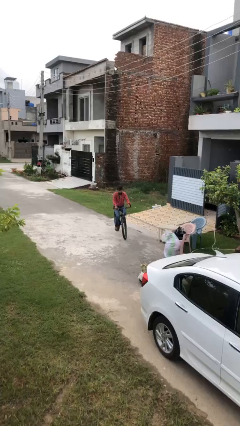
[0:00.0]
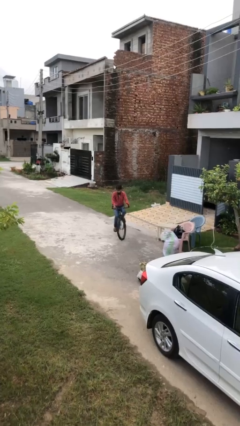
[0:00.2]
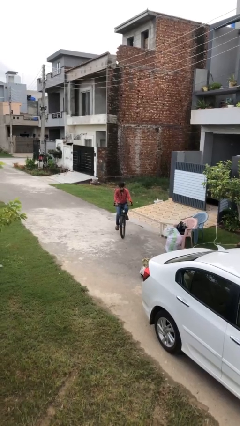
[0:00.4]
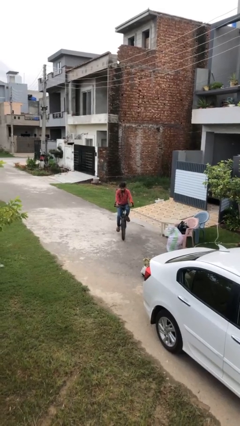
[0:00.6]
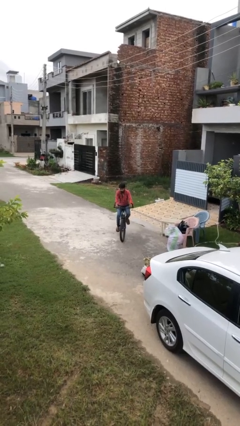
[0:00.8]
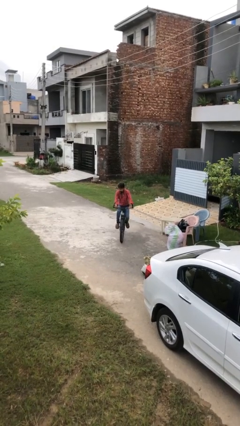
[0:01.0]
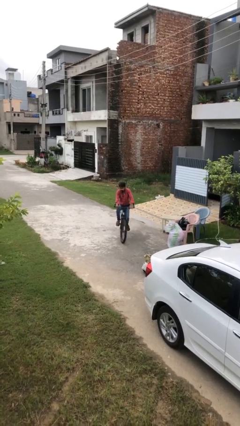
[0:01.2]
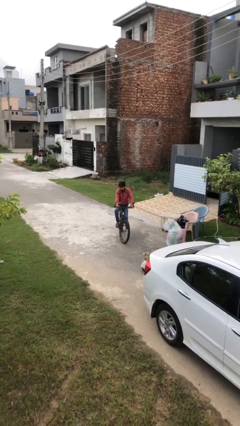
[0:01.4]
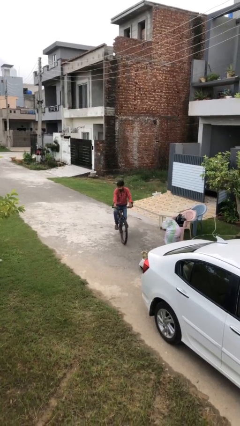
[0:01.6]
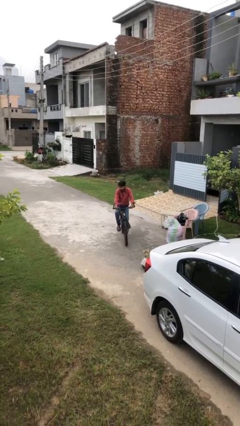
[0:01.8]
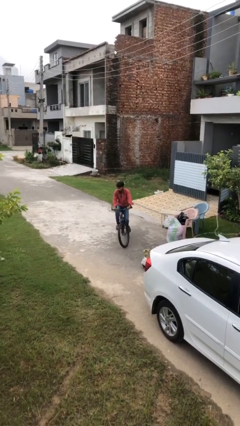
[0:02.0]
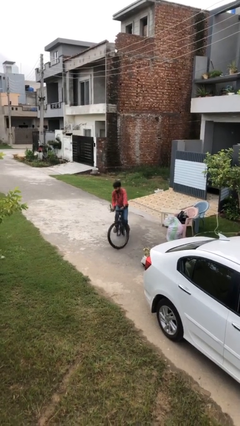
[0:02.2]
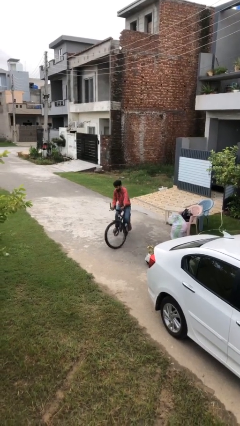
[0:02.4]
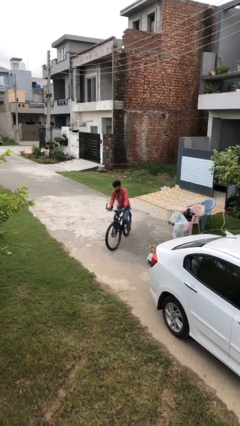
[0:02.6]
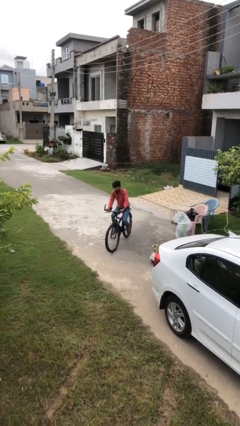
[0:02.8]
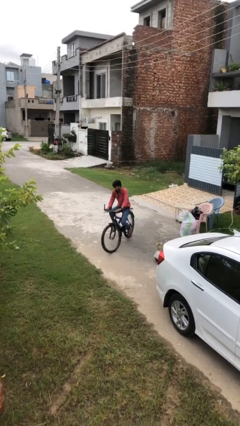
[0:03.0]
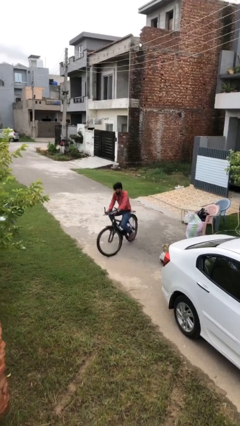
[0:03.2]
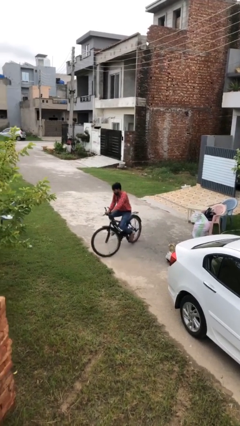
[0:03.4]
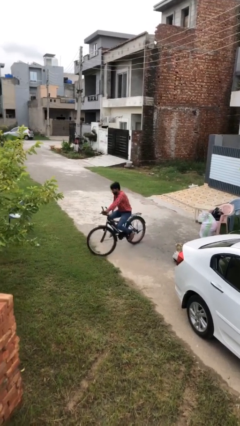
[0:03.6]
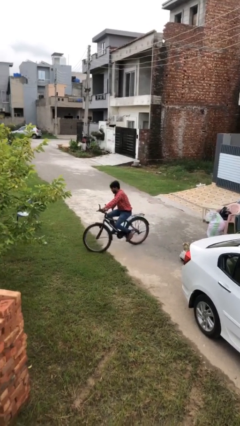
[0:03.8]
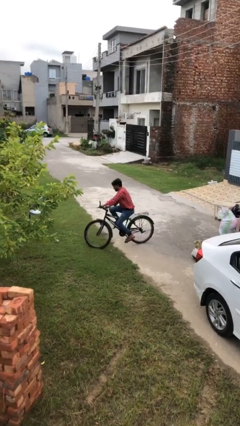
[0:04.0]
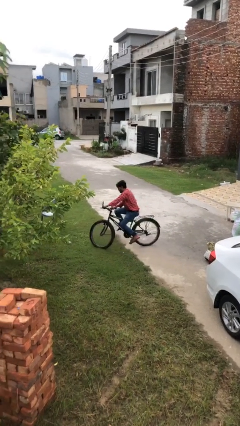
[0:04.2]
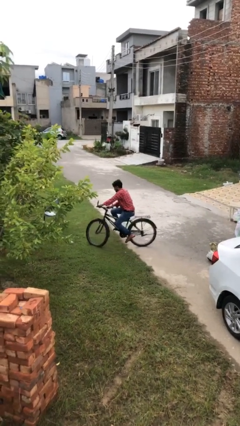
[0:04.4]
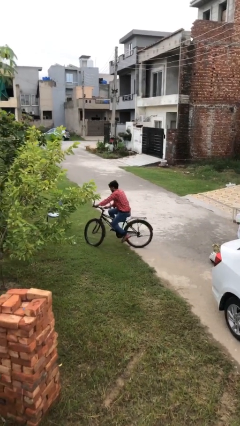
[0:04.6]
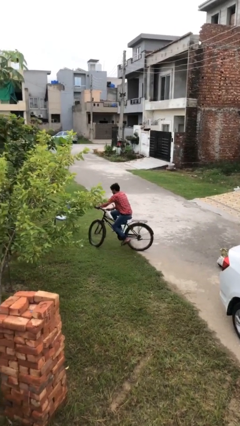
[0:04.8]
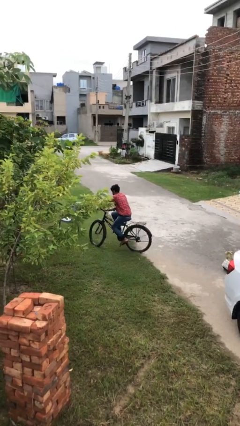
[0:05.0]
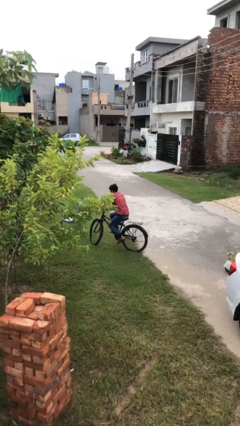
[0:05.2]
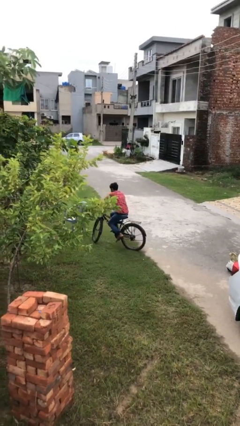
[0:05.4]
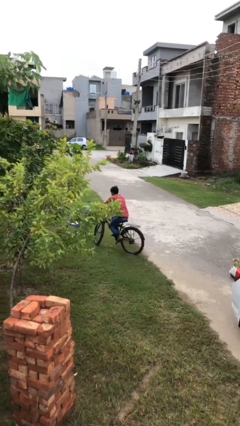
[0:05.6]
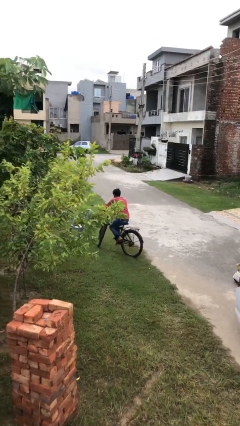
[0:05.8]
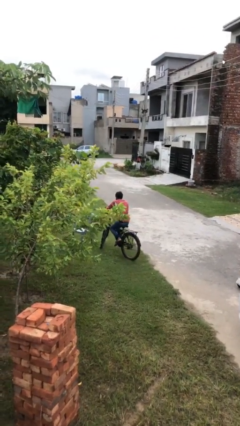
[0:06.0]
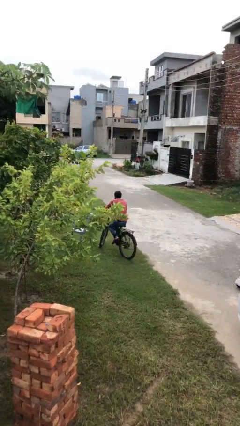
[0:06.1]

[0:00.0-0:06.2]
person rides bicycle

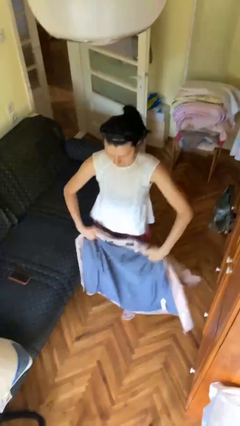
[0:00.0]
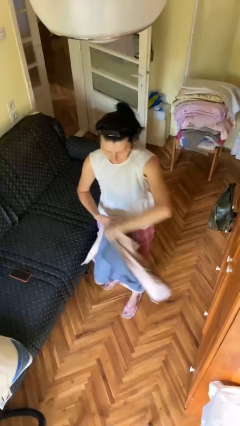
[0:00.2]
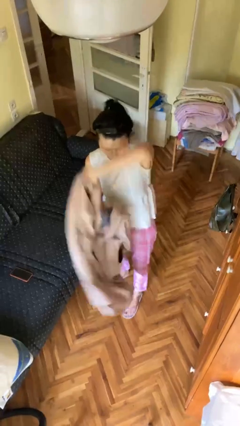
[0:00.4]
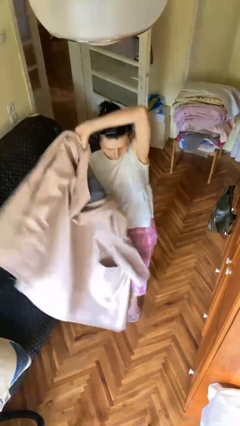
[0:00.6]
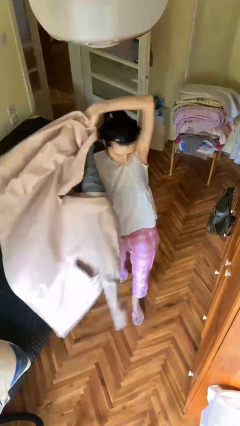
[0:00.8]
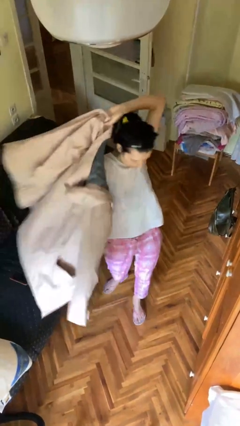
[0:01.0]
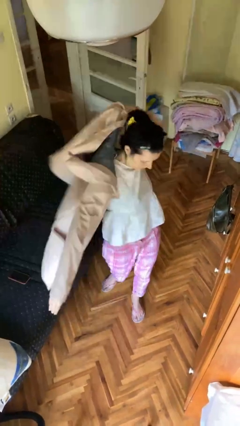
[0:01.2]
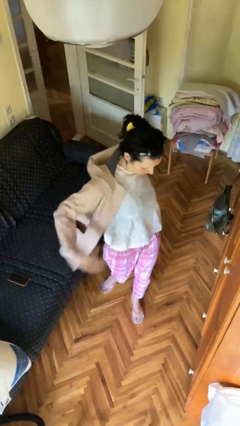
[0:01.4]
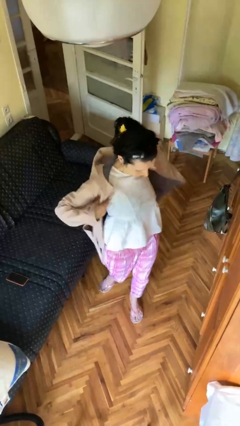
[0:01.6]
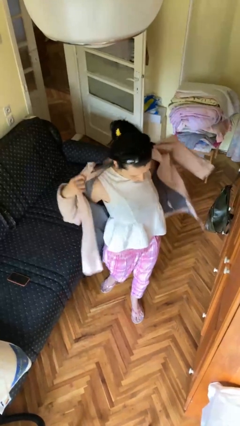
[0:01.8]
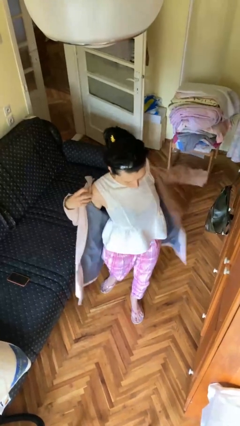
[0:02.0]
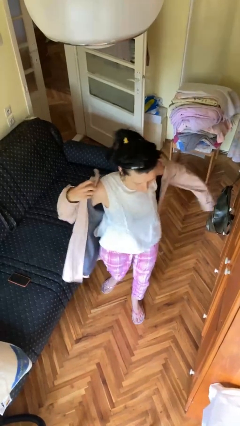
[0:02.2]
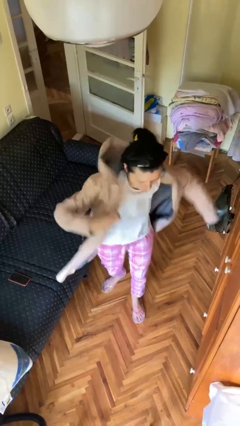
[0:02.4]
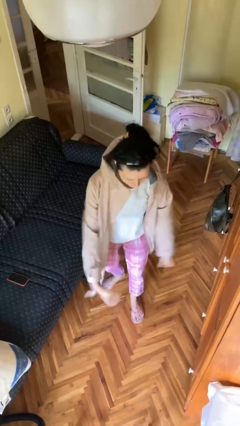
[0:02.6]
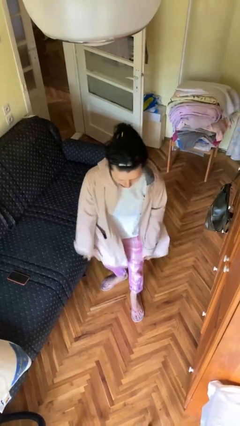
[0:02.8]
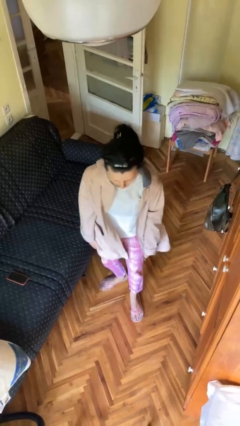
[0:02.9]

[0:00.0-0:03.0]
person puts on jacket

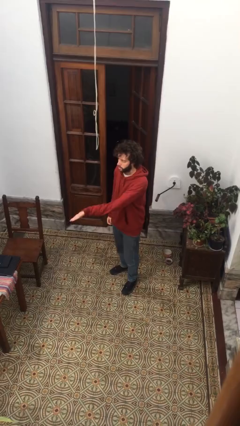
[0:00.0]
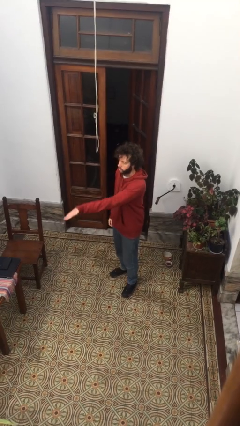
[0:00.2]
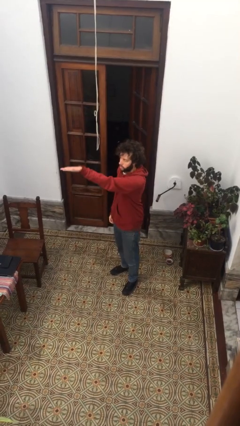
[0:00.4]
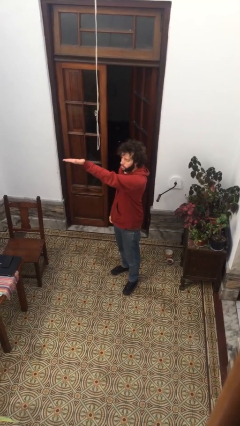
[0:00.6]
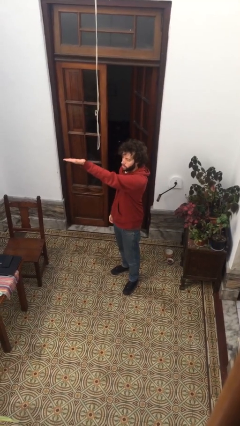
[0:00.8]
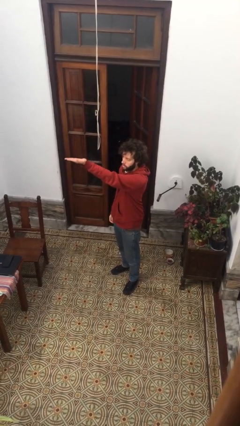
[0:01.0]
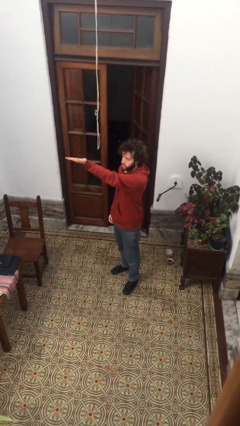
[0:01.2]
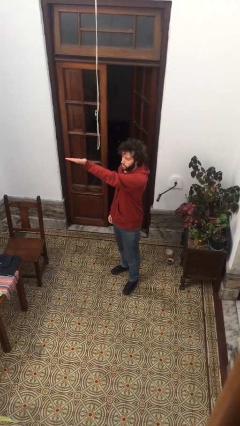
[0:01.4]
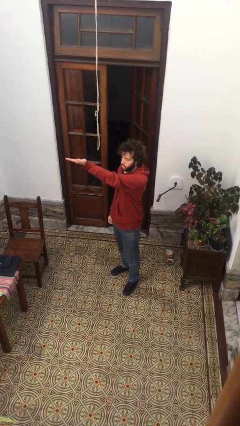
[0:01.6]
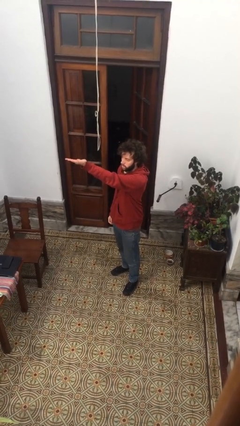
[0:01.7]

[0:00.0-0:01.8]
person gestures swipe up

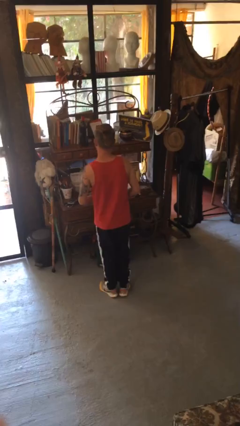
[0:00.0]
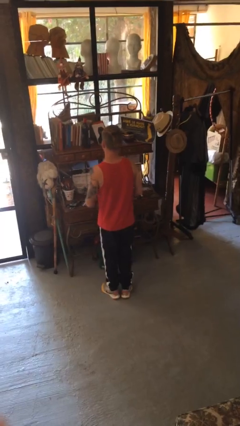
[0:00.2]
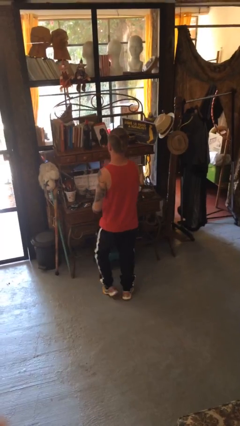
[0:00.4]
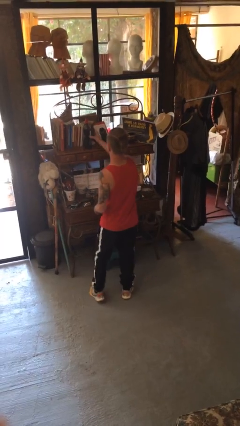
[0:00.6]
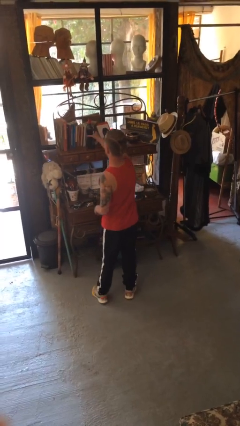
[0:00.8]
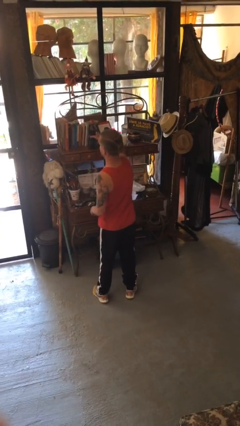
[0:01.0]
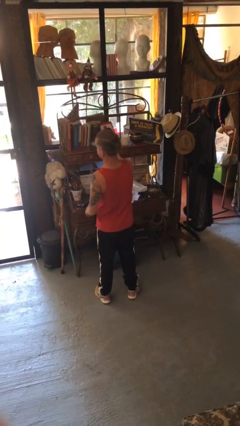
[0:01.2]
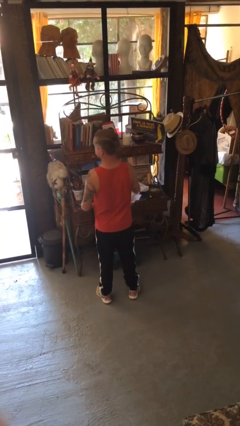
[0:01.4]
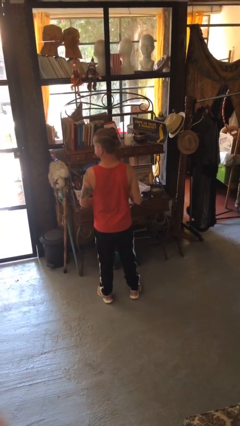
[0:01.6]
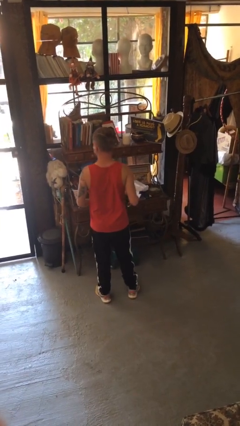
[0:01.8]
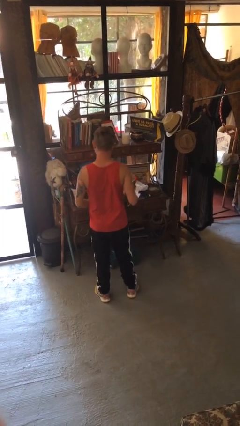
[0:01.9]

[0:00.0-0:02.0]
person picks up object from shelf

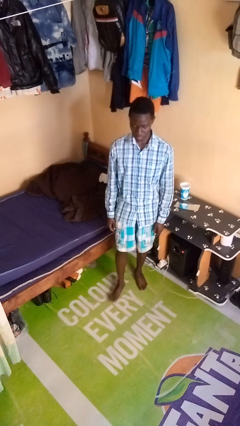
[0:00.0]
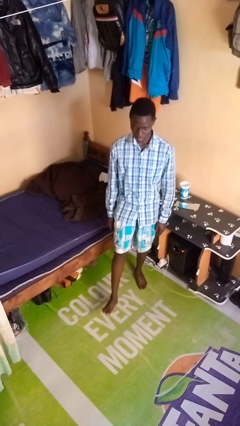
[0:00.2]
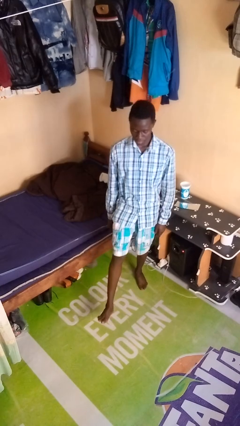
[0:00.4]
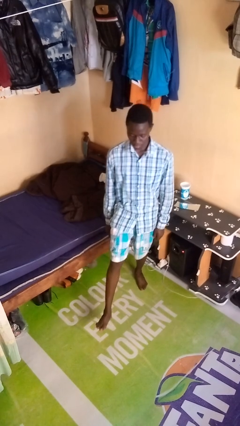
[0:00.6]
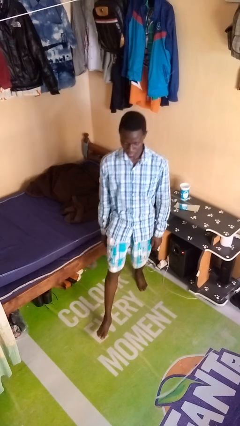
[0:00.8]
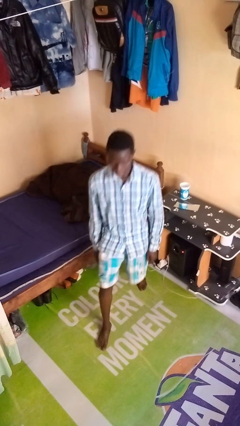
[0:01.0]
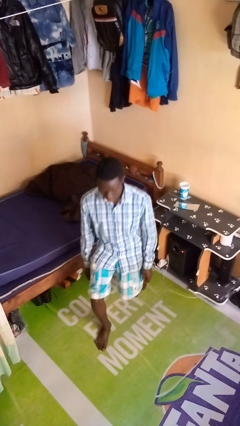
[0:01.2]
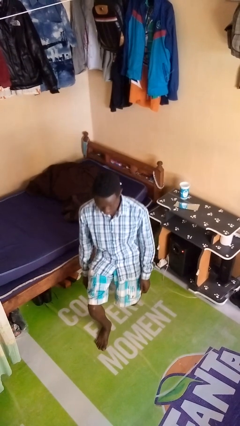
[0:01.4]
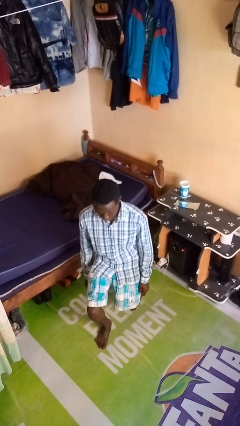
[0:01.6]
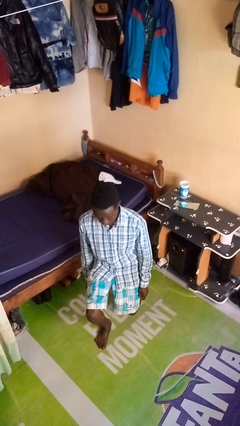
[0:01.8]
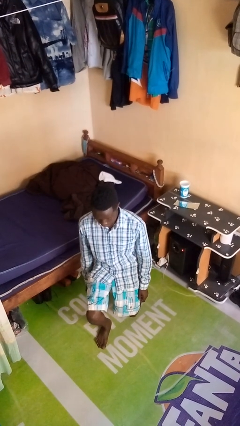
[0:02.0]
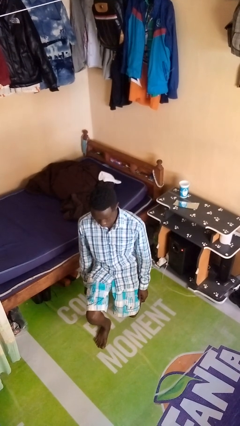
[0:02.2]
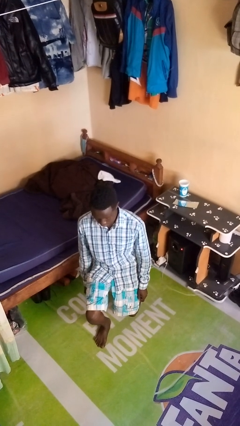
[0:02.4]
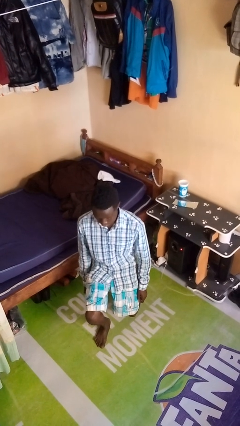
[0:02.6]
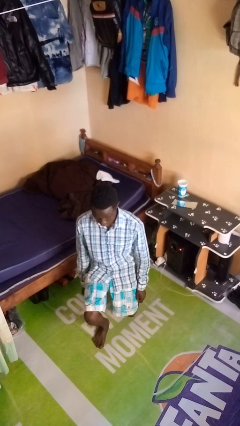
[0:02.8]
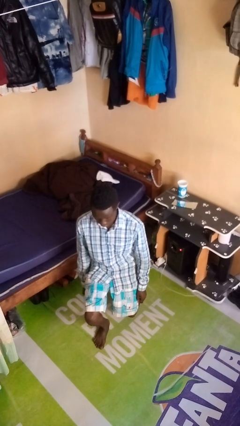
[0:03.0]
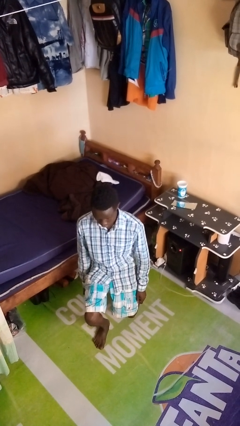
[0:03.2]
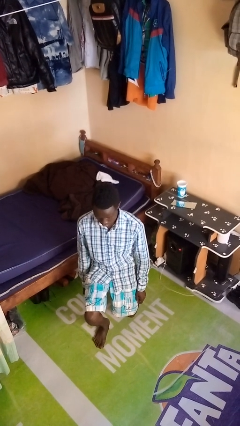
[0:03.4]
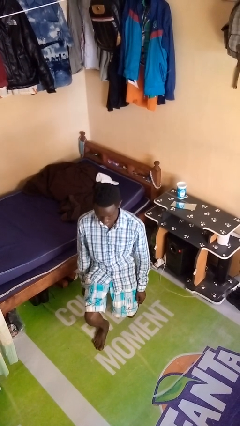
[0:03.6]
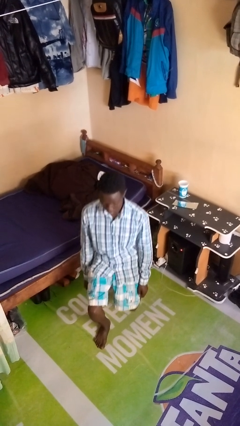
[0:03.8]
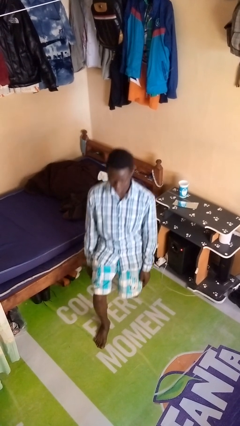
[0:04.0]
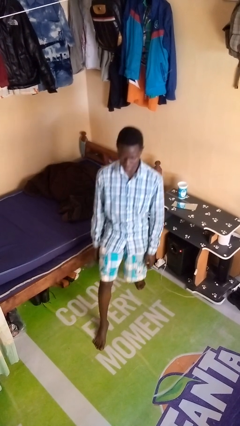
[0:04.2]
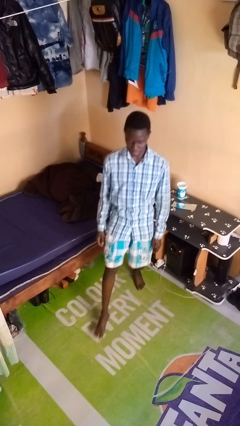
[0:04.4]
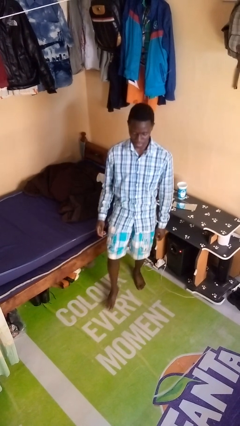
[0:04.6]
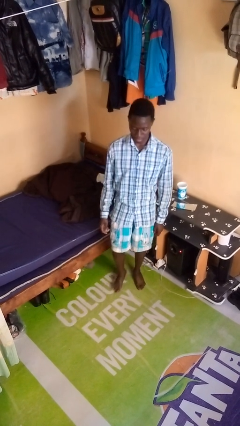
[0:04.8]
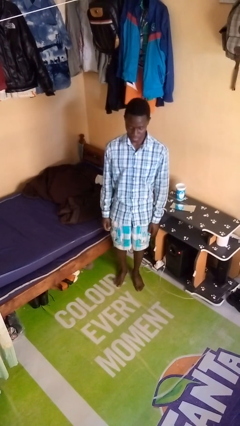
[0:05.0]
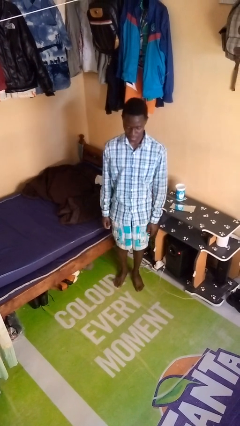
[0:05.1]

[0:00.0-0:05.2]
person exercises with lunges
